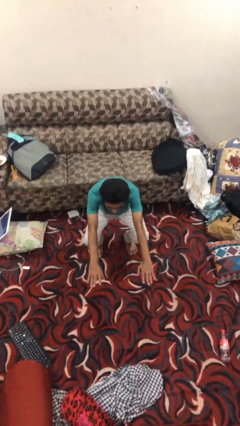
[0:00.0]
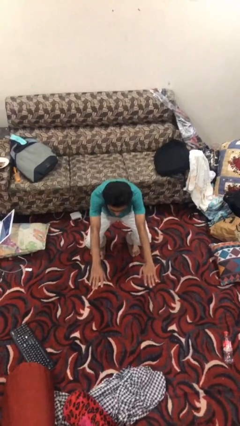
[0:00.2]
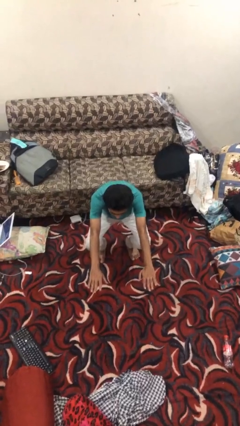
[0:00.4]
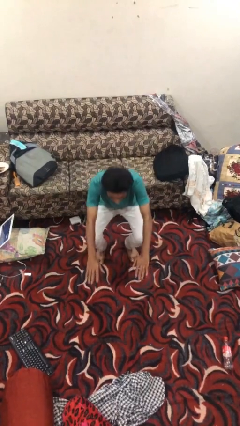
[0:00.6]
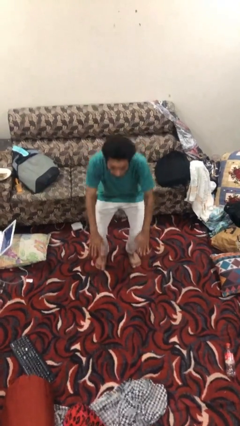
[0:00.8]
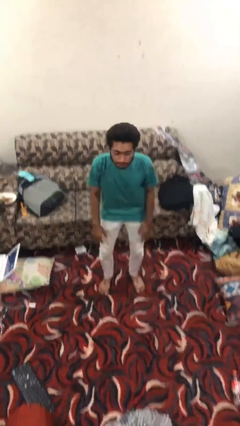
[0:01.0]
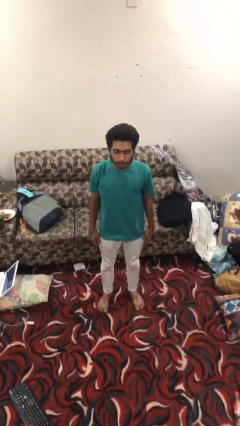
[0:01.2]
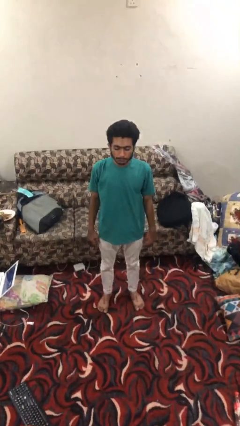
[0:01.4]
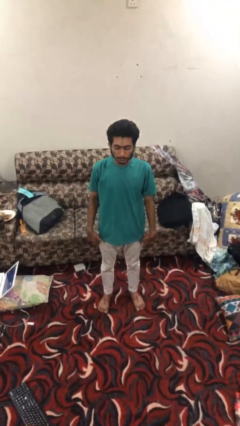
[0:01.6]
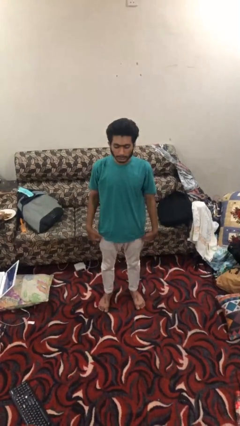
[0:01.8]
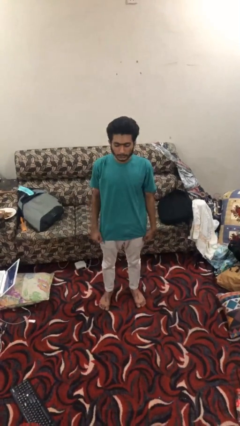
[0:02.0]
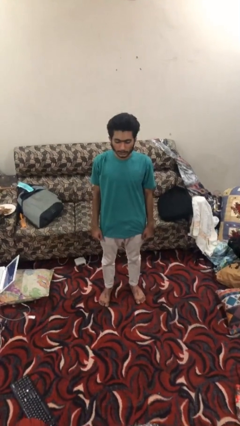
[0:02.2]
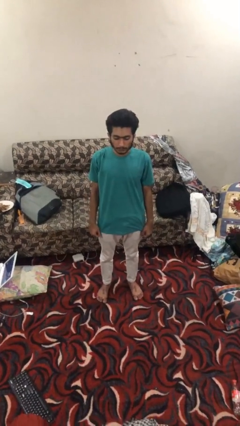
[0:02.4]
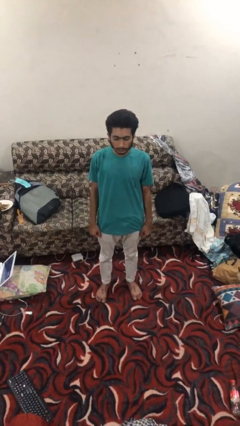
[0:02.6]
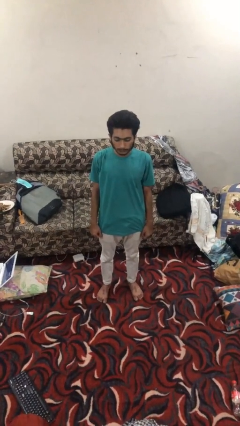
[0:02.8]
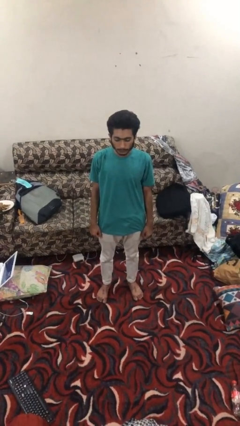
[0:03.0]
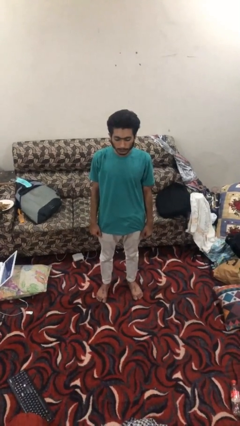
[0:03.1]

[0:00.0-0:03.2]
person stands up

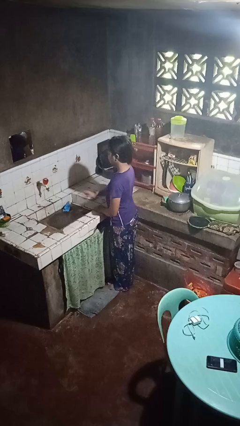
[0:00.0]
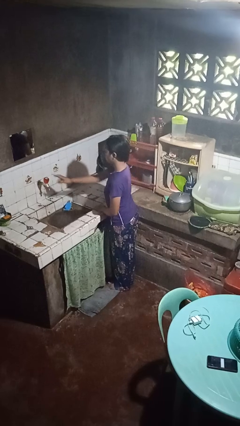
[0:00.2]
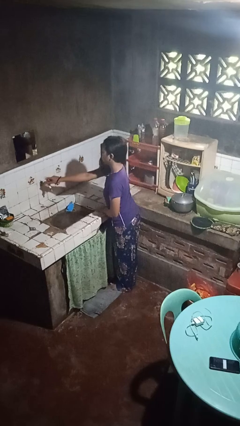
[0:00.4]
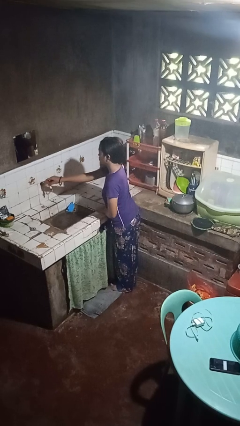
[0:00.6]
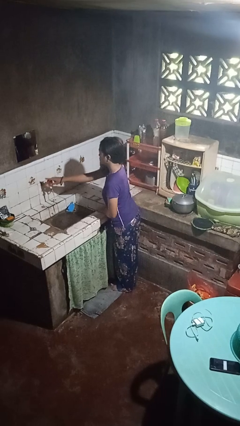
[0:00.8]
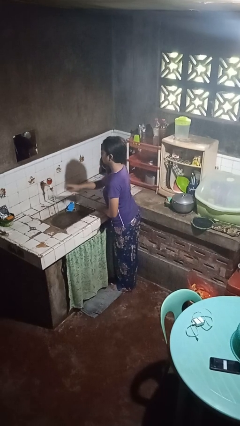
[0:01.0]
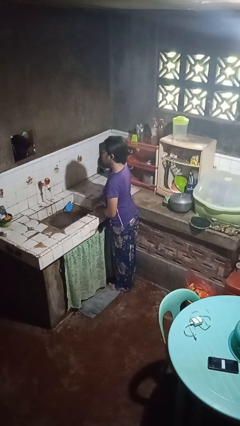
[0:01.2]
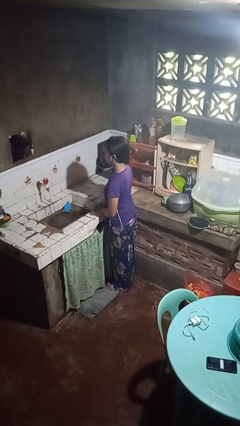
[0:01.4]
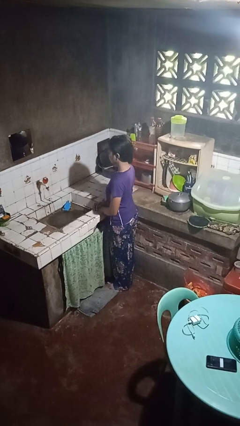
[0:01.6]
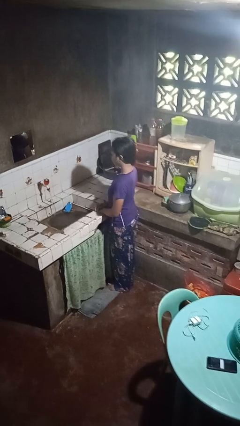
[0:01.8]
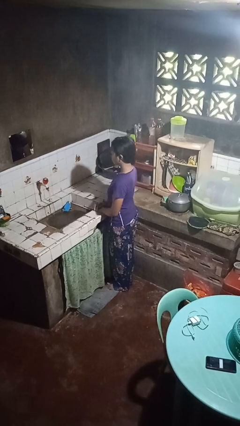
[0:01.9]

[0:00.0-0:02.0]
person turns on faucet

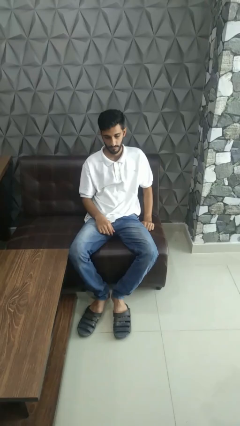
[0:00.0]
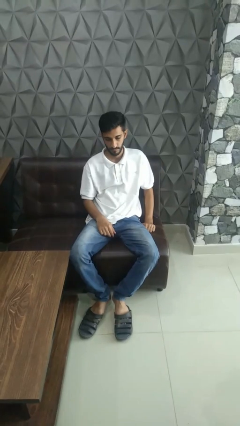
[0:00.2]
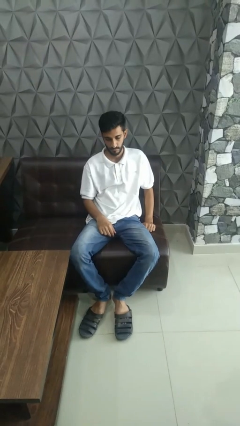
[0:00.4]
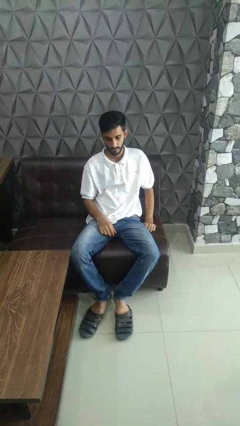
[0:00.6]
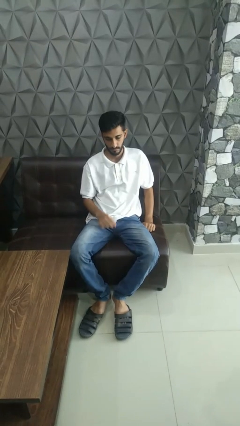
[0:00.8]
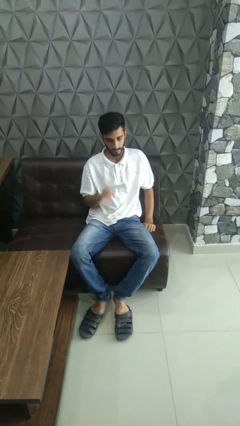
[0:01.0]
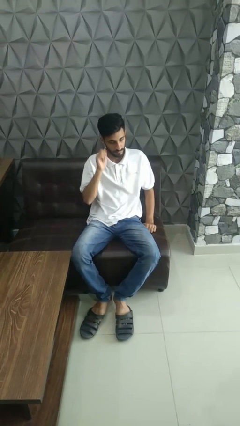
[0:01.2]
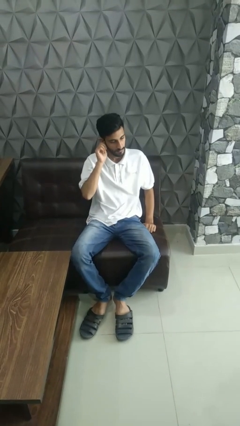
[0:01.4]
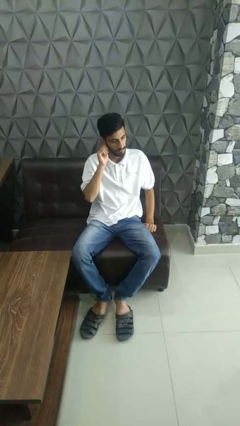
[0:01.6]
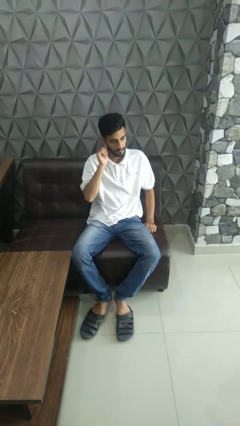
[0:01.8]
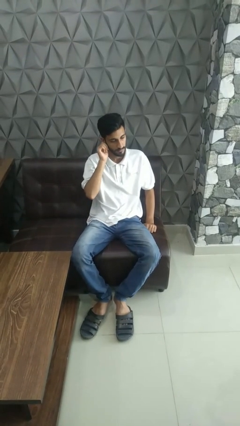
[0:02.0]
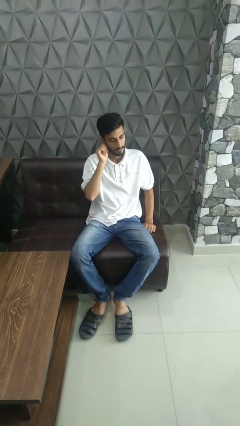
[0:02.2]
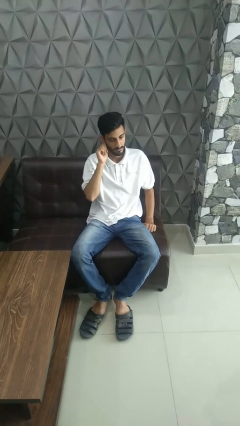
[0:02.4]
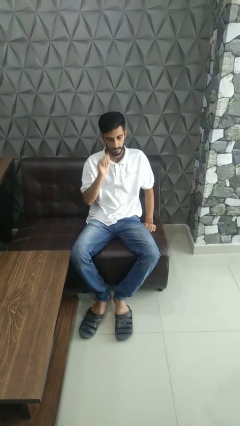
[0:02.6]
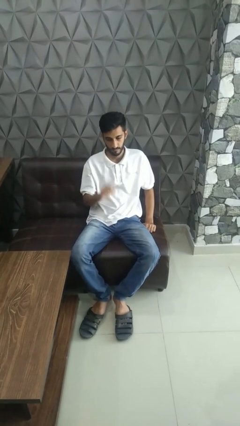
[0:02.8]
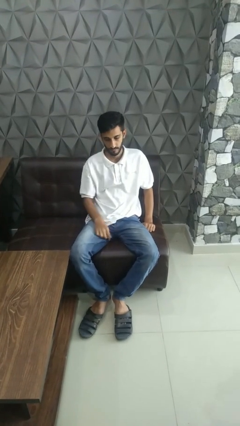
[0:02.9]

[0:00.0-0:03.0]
person touches earlobe

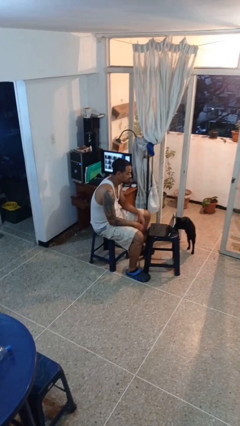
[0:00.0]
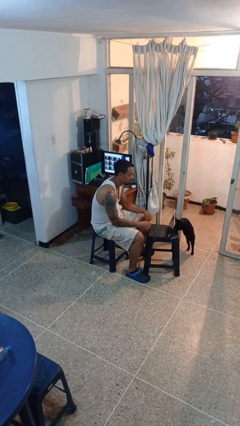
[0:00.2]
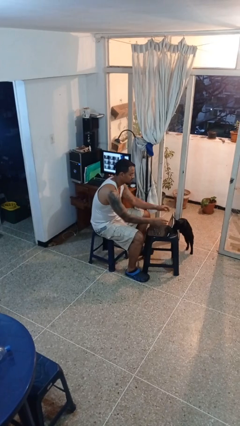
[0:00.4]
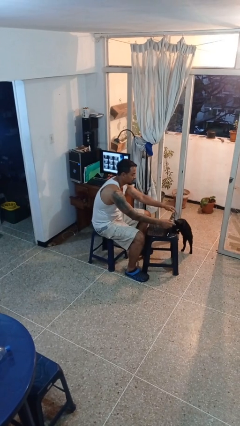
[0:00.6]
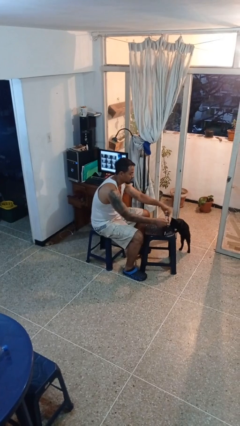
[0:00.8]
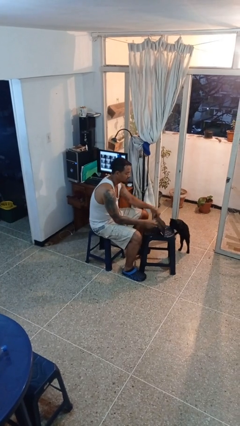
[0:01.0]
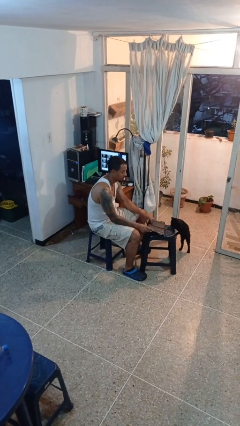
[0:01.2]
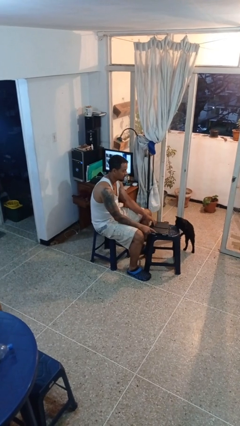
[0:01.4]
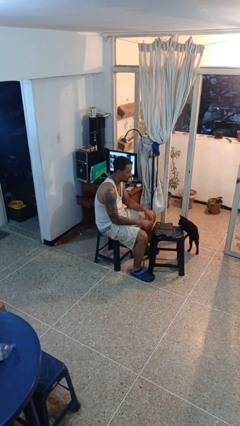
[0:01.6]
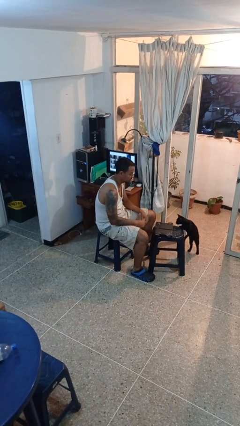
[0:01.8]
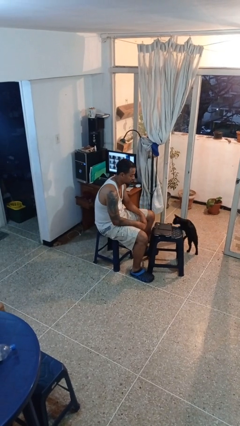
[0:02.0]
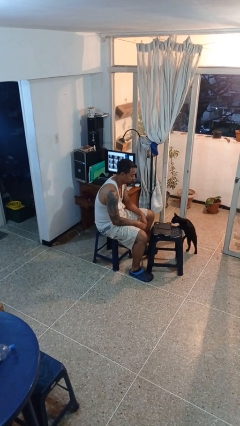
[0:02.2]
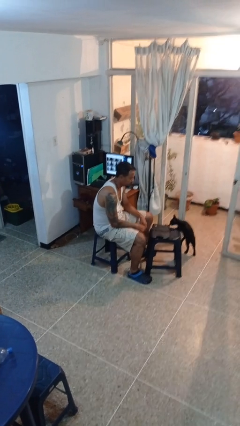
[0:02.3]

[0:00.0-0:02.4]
person closes laptop

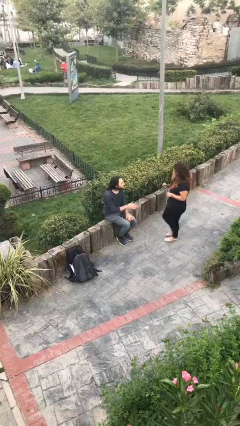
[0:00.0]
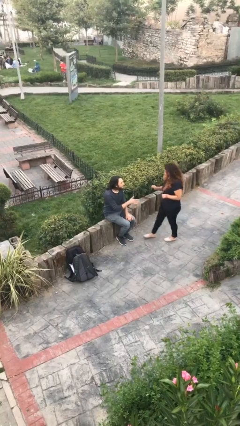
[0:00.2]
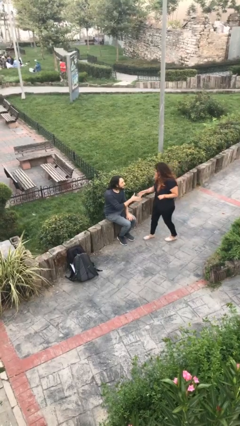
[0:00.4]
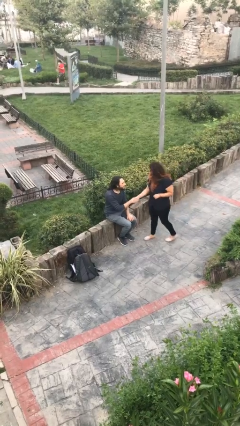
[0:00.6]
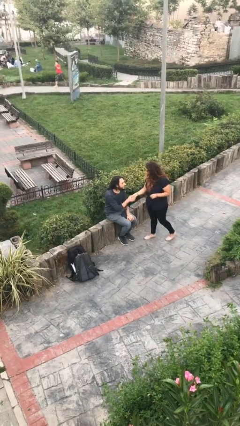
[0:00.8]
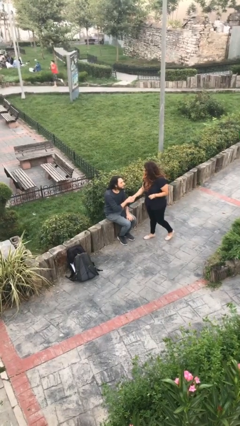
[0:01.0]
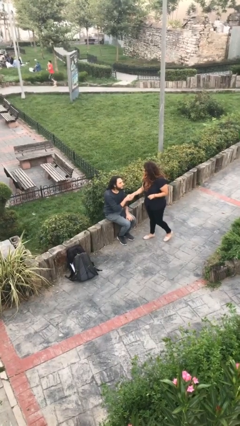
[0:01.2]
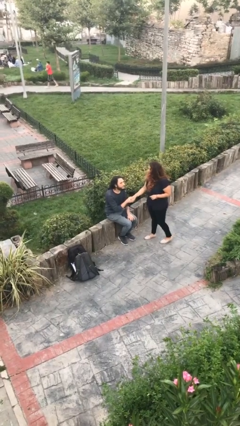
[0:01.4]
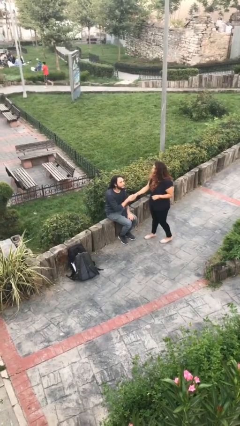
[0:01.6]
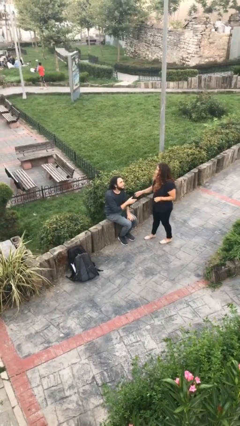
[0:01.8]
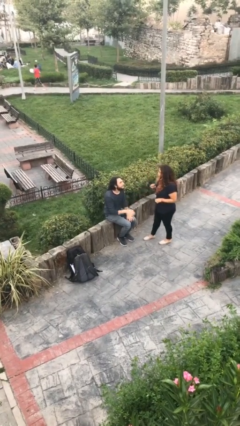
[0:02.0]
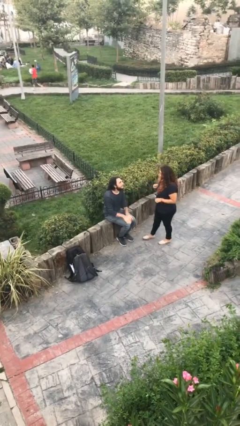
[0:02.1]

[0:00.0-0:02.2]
person shakes hand

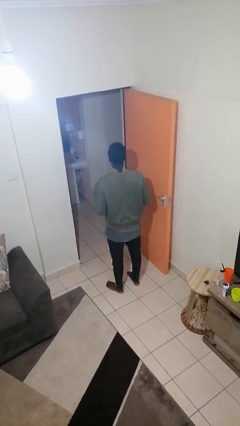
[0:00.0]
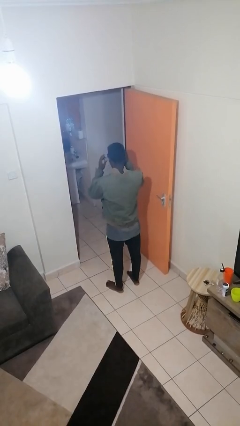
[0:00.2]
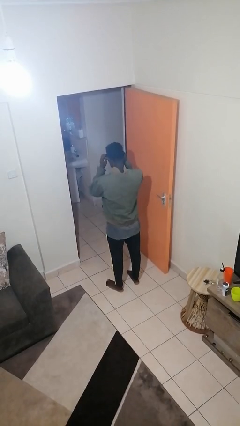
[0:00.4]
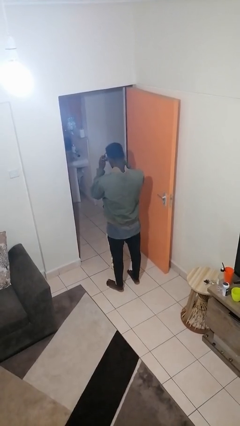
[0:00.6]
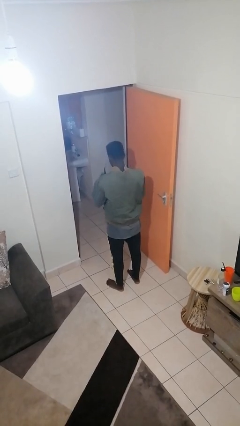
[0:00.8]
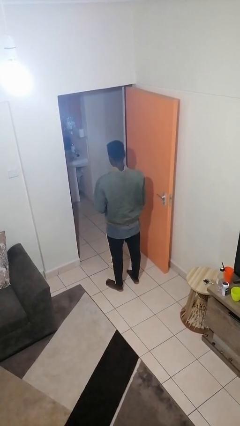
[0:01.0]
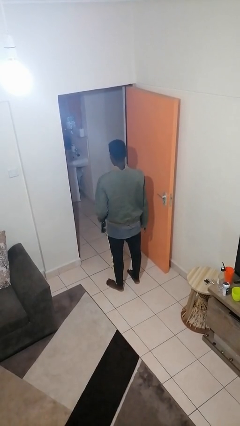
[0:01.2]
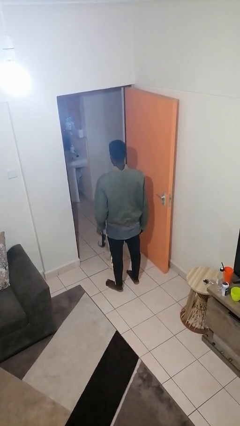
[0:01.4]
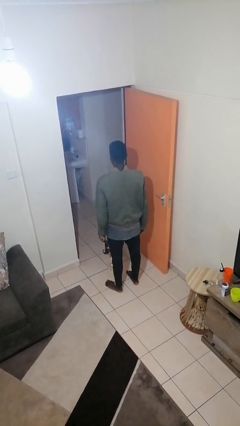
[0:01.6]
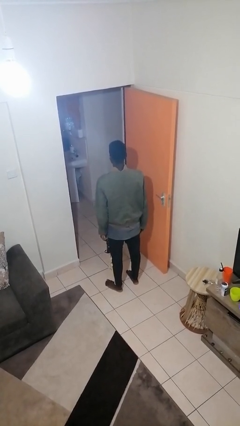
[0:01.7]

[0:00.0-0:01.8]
person takes off sunglasses

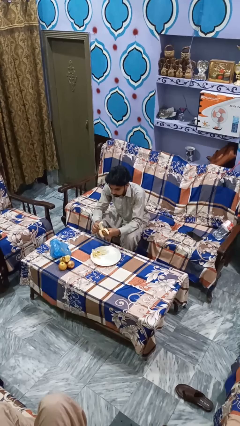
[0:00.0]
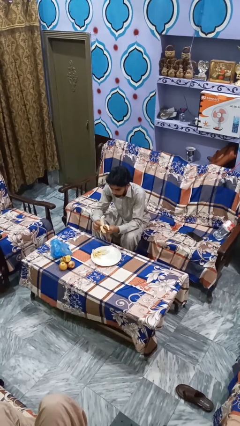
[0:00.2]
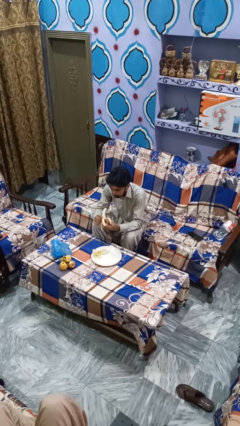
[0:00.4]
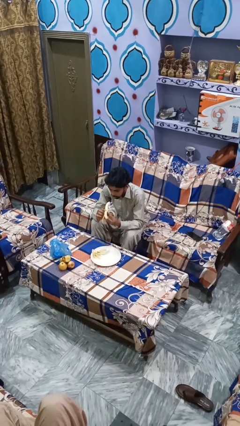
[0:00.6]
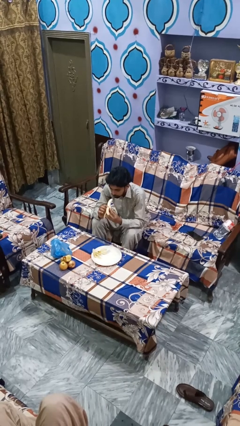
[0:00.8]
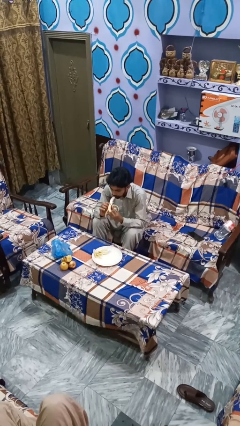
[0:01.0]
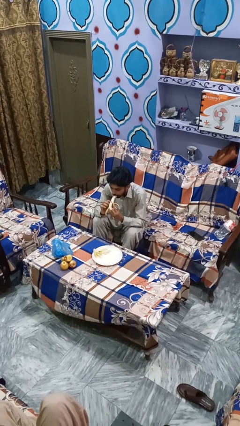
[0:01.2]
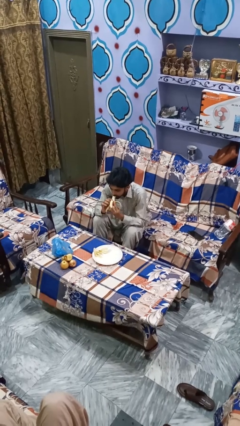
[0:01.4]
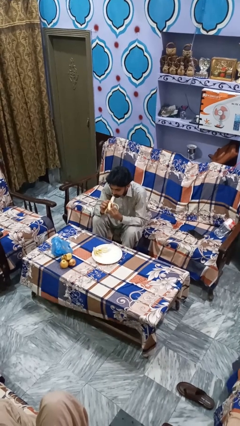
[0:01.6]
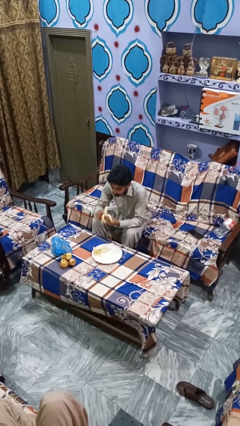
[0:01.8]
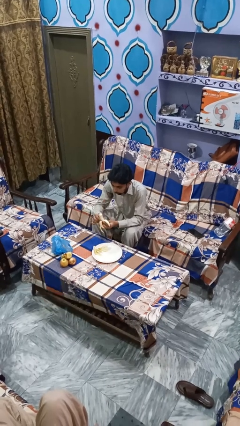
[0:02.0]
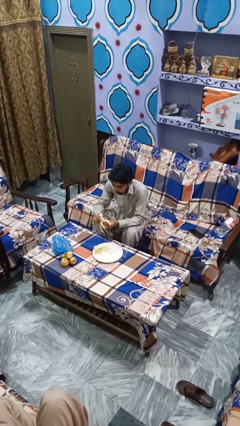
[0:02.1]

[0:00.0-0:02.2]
person eats banana

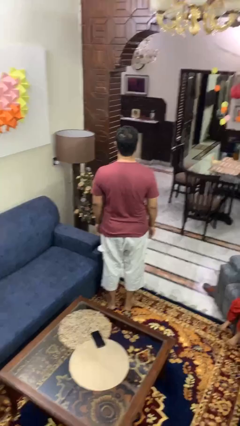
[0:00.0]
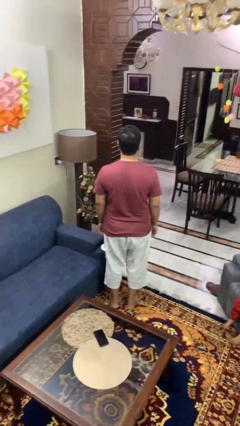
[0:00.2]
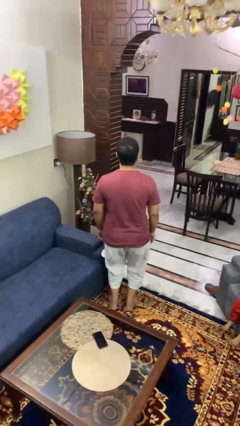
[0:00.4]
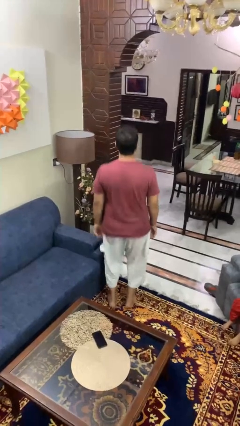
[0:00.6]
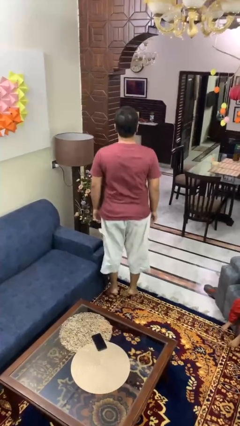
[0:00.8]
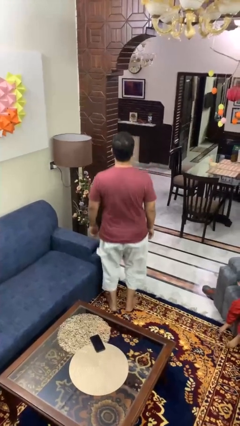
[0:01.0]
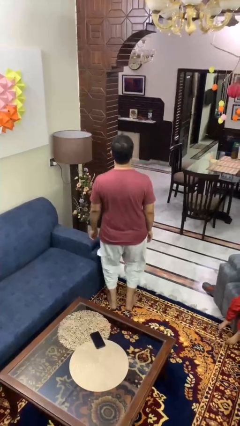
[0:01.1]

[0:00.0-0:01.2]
person jumps
